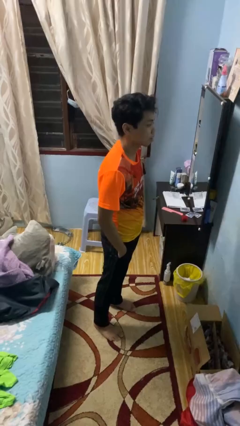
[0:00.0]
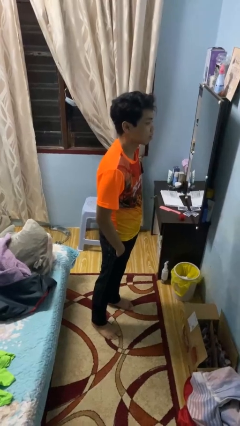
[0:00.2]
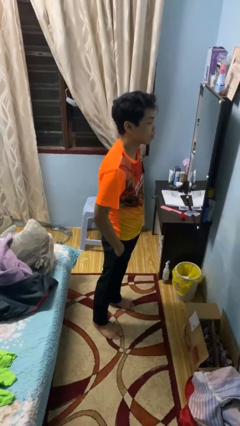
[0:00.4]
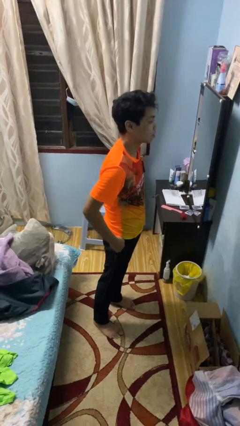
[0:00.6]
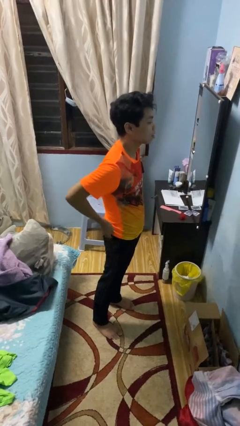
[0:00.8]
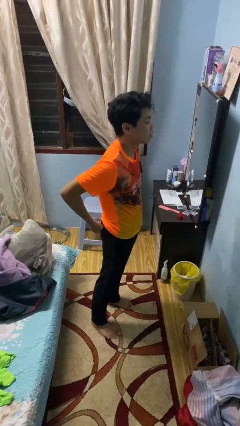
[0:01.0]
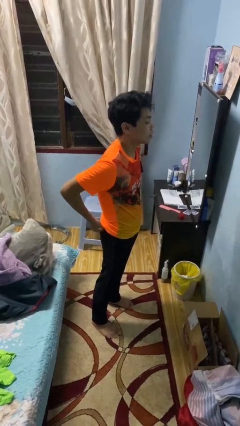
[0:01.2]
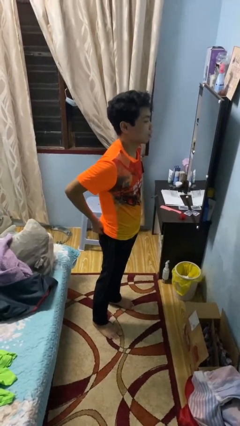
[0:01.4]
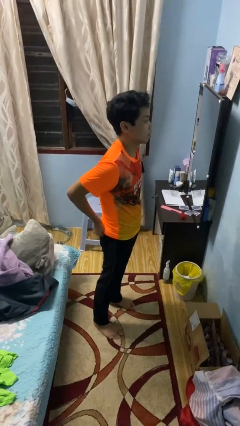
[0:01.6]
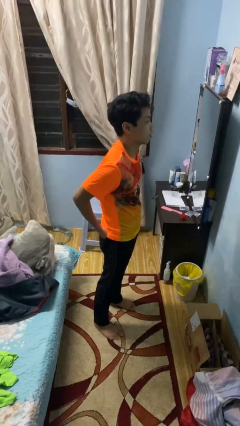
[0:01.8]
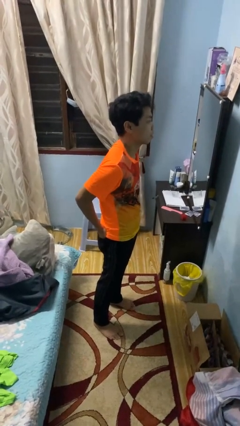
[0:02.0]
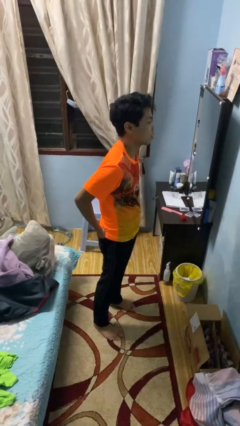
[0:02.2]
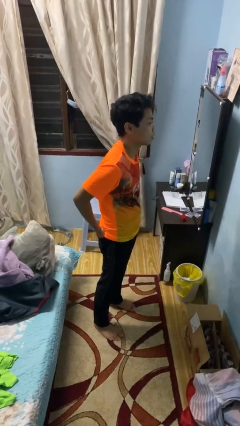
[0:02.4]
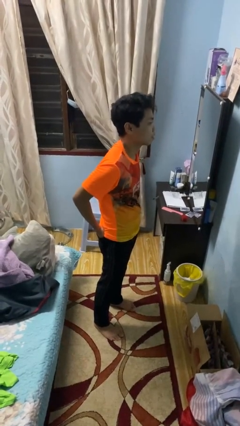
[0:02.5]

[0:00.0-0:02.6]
person puts hands in back pockets

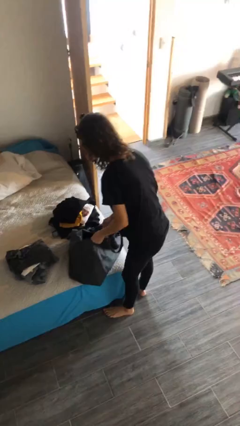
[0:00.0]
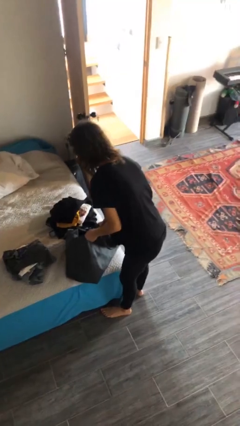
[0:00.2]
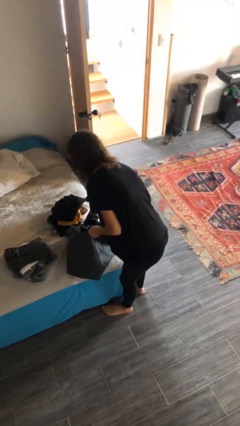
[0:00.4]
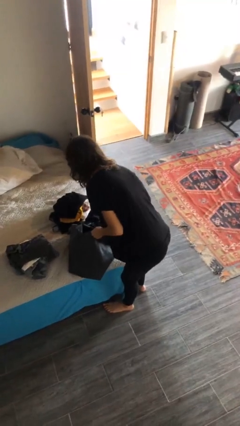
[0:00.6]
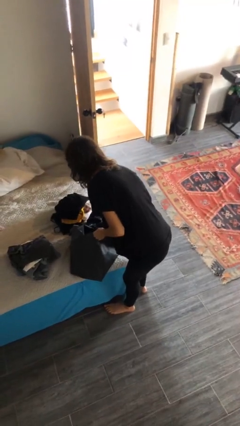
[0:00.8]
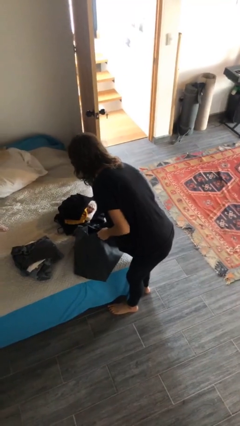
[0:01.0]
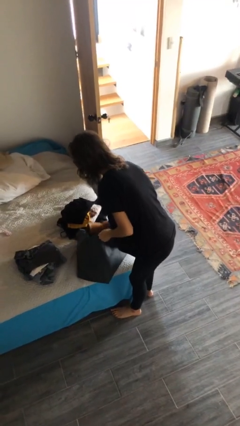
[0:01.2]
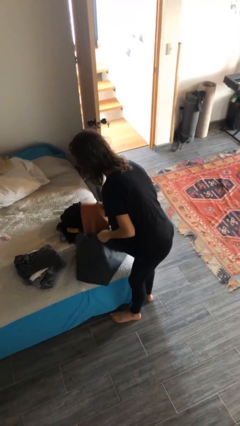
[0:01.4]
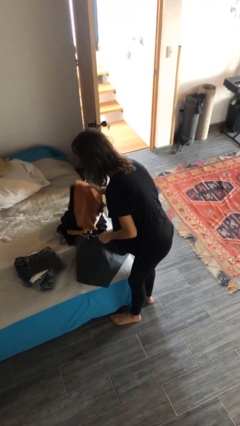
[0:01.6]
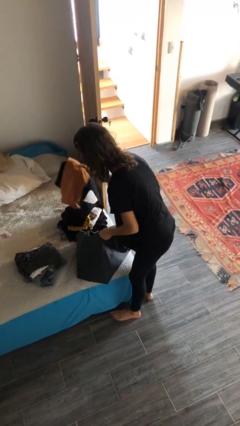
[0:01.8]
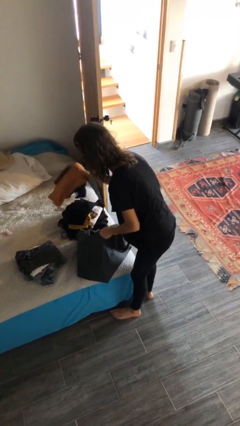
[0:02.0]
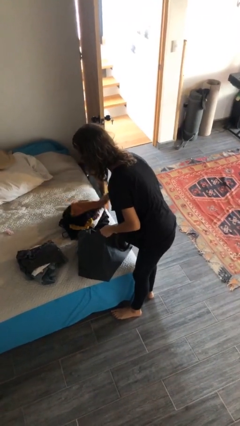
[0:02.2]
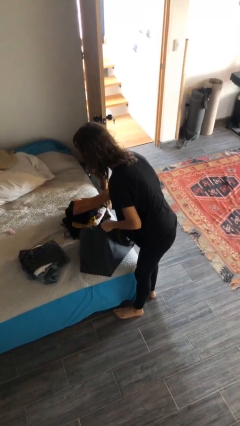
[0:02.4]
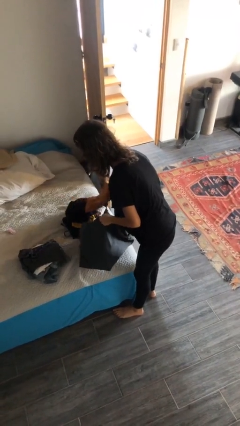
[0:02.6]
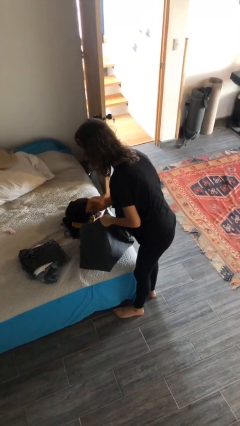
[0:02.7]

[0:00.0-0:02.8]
person unloads clothes from suitcase

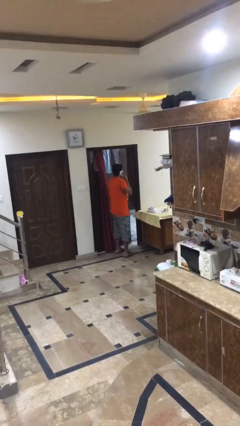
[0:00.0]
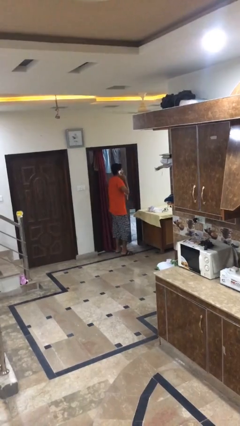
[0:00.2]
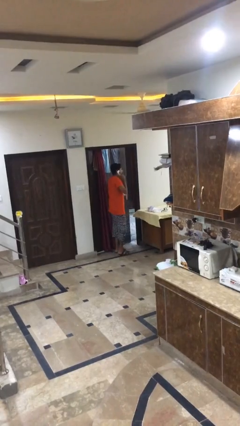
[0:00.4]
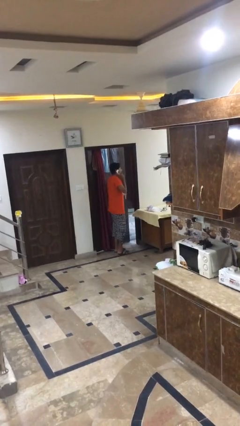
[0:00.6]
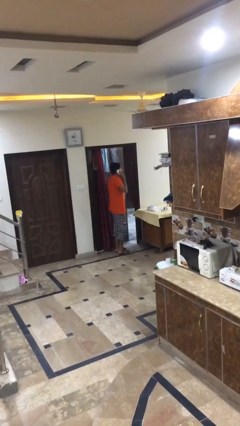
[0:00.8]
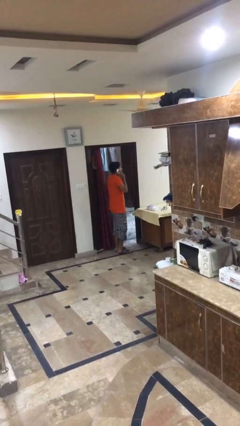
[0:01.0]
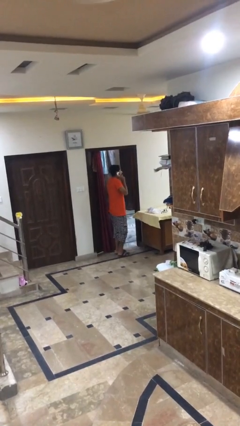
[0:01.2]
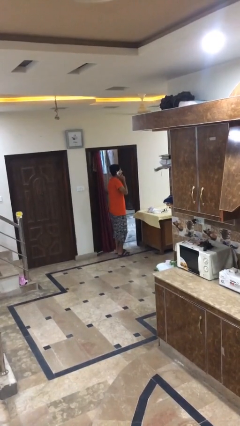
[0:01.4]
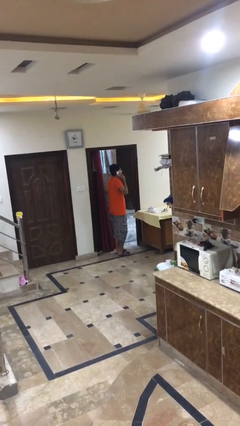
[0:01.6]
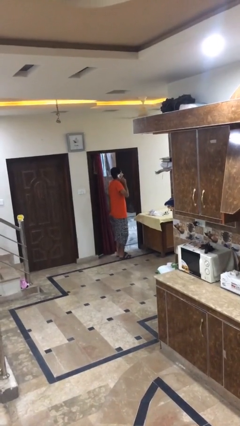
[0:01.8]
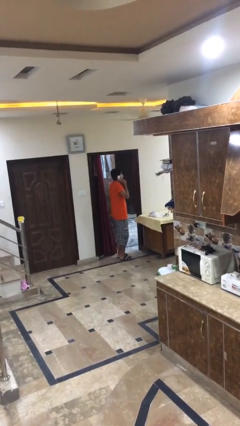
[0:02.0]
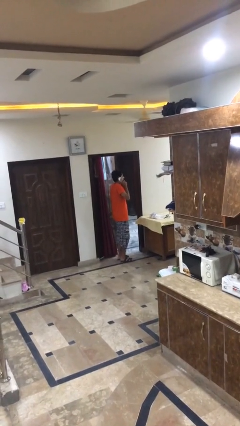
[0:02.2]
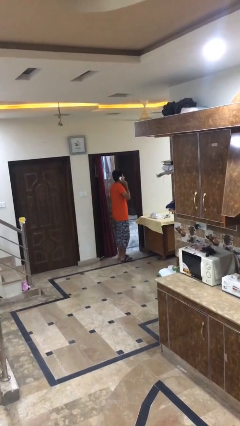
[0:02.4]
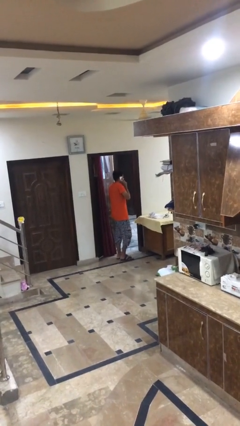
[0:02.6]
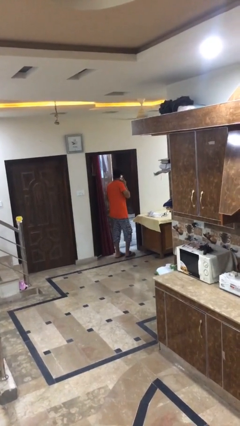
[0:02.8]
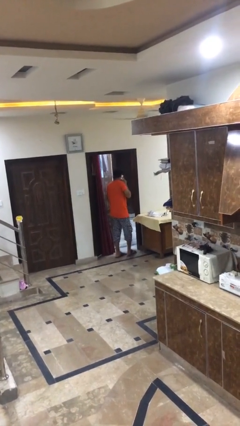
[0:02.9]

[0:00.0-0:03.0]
person opens facility door

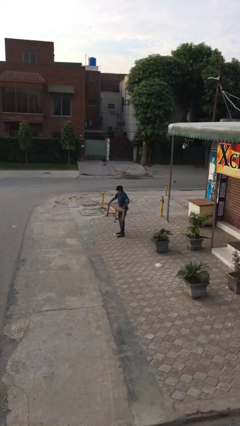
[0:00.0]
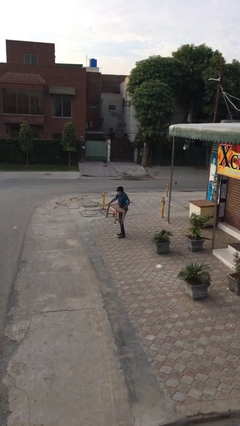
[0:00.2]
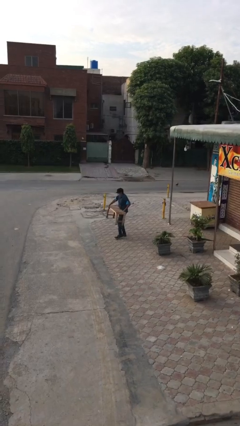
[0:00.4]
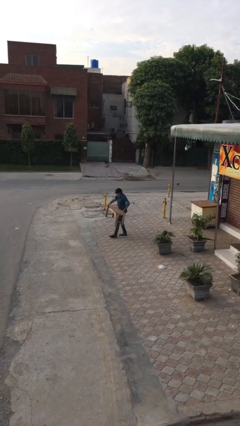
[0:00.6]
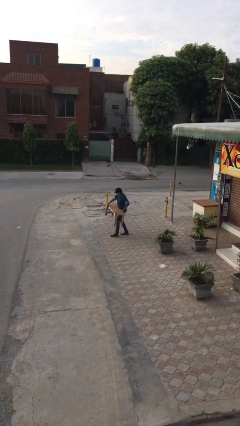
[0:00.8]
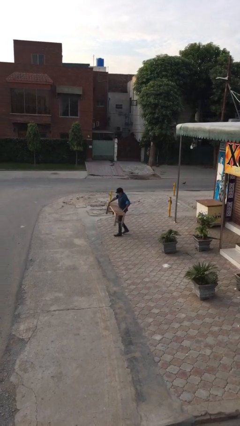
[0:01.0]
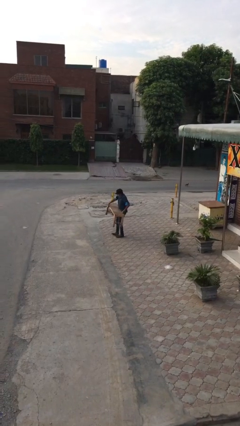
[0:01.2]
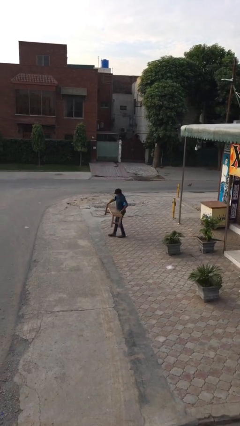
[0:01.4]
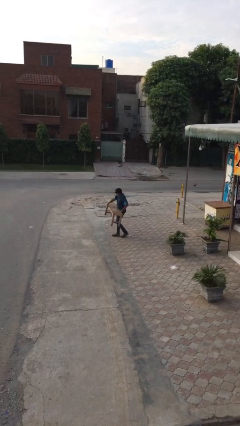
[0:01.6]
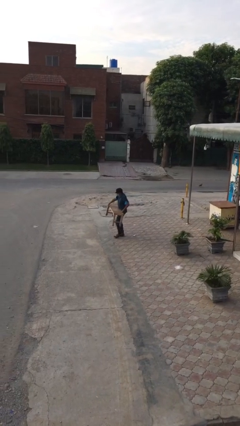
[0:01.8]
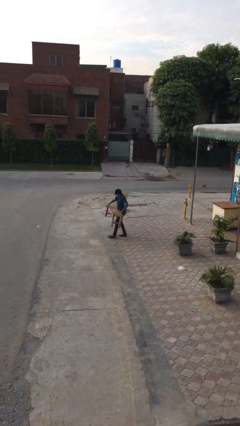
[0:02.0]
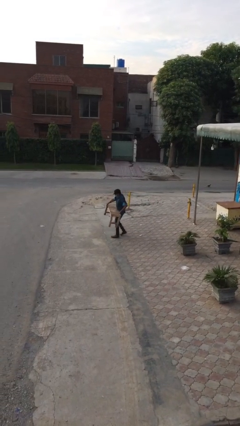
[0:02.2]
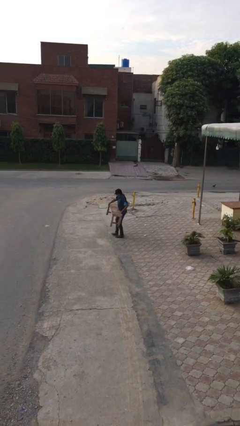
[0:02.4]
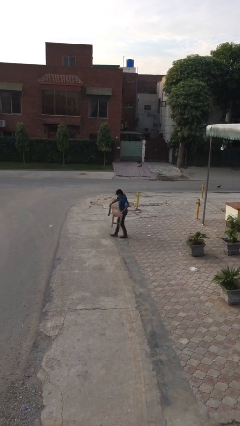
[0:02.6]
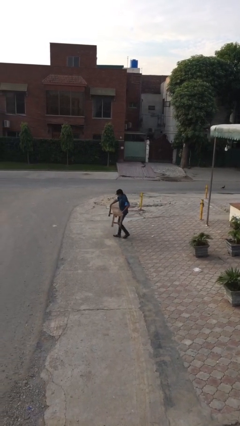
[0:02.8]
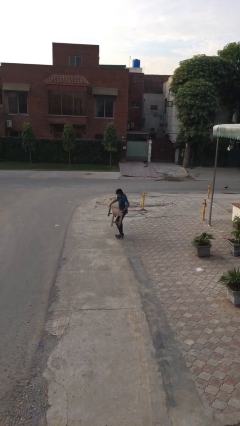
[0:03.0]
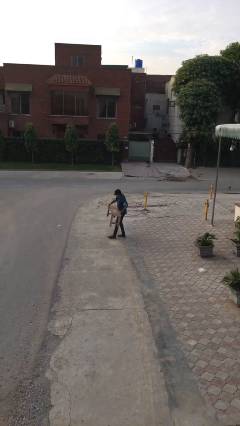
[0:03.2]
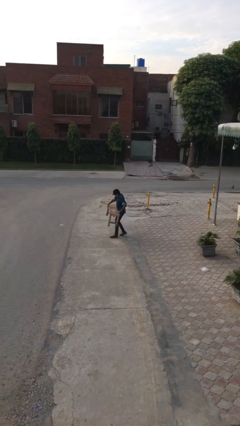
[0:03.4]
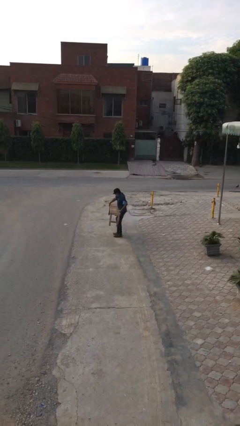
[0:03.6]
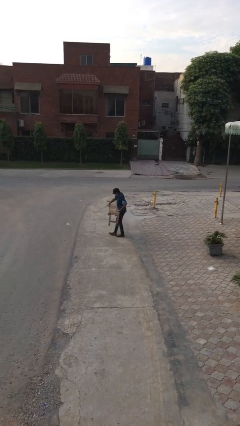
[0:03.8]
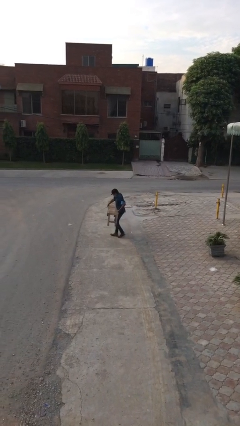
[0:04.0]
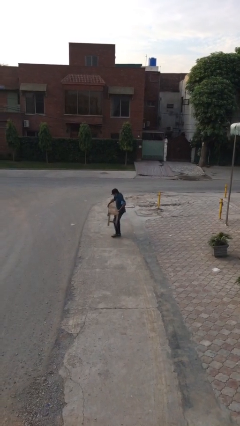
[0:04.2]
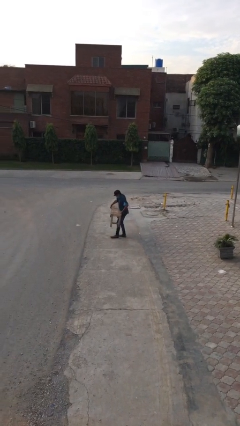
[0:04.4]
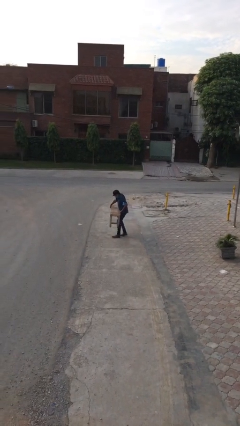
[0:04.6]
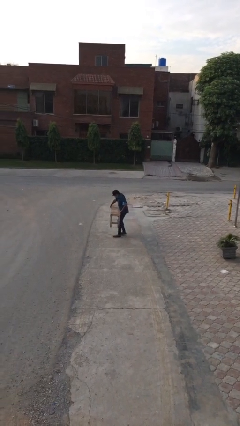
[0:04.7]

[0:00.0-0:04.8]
person carries heavy object

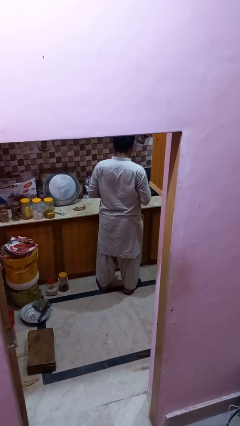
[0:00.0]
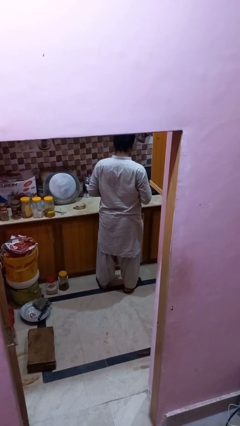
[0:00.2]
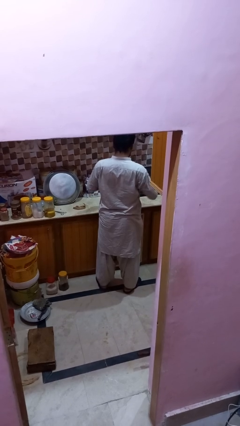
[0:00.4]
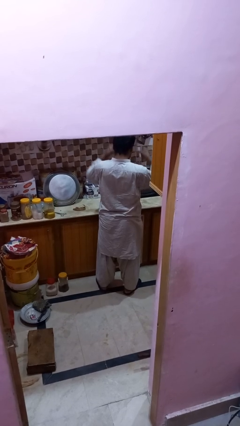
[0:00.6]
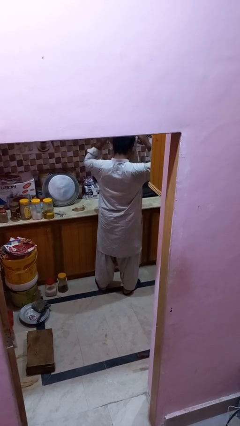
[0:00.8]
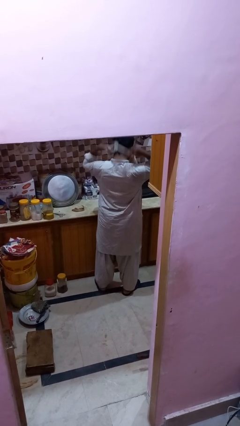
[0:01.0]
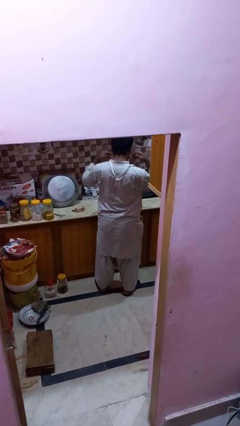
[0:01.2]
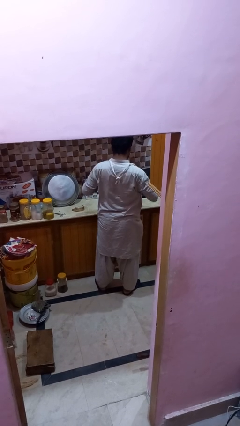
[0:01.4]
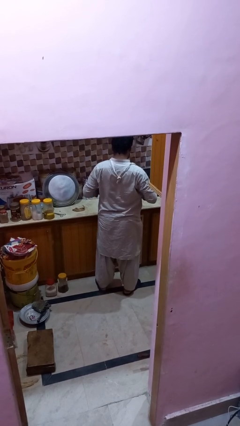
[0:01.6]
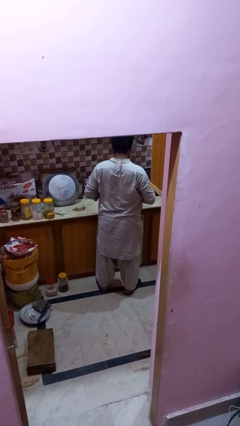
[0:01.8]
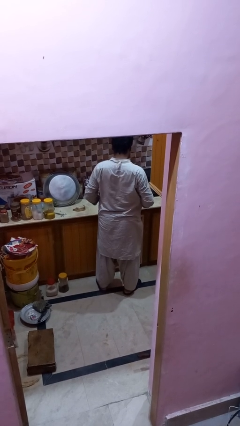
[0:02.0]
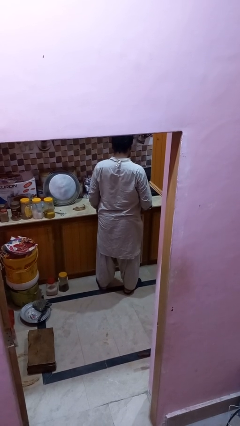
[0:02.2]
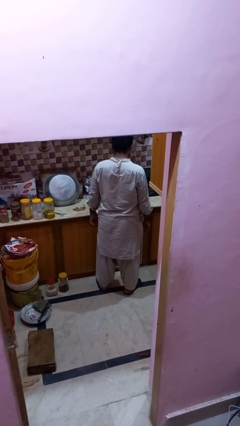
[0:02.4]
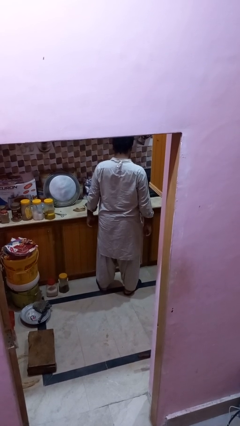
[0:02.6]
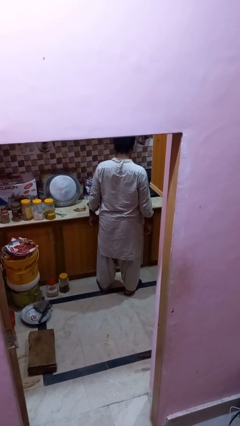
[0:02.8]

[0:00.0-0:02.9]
person puts on apron

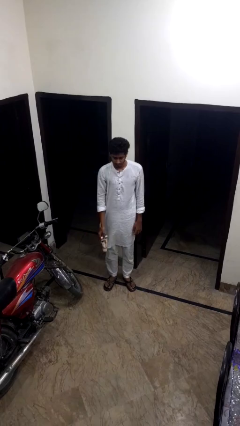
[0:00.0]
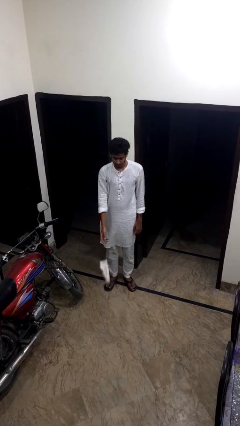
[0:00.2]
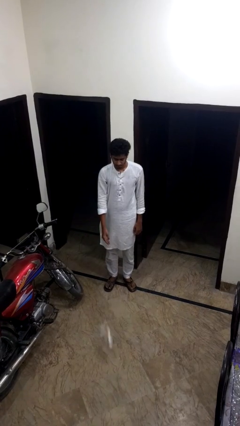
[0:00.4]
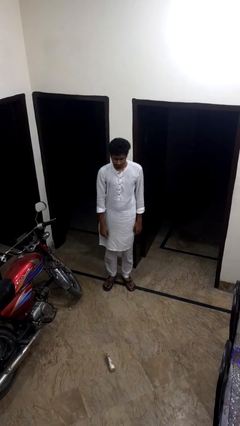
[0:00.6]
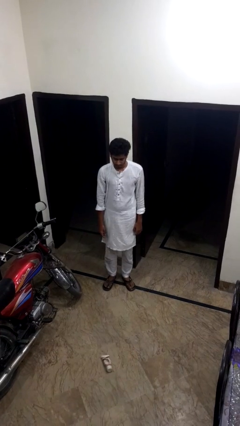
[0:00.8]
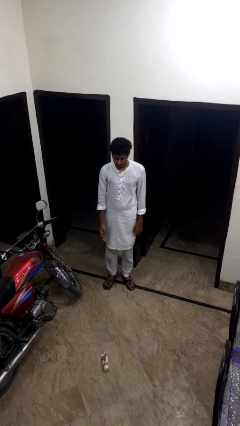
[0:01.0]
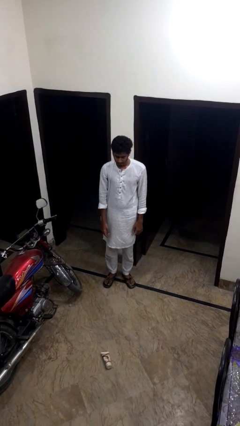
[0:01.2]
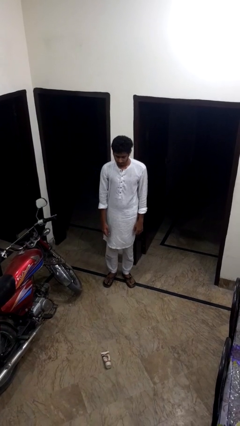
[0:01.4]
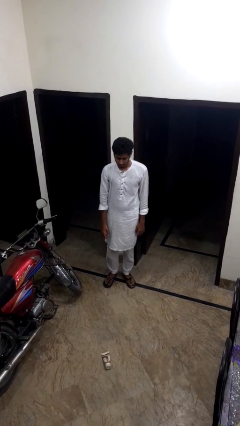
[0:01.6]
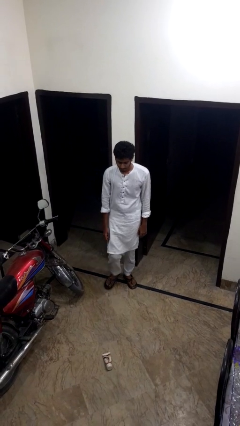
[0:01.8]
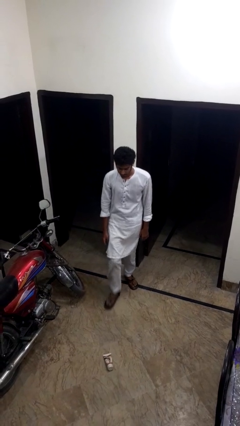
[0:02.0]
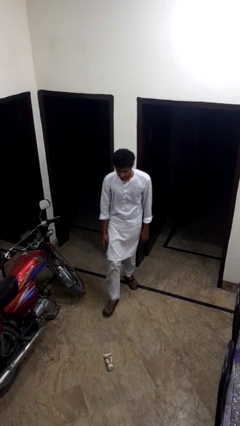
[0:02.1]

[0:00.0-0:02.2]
person throws object to ground
